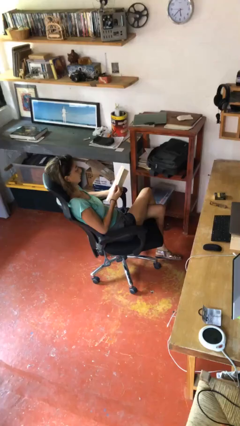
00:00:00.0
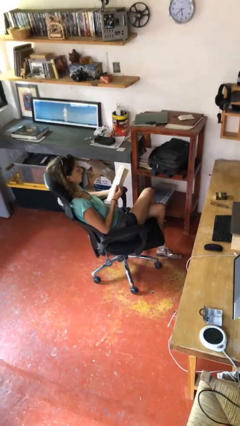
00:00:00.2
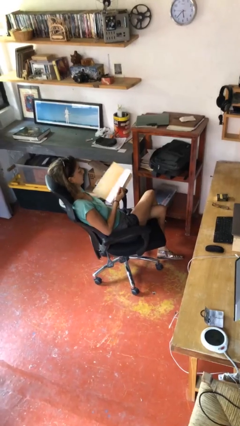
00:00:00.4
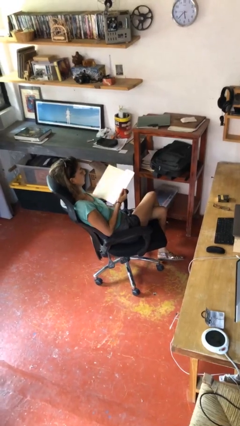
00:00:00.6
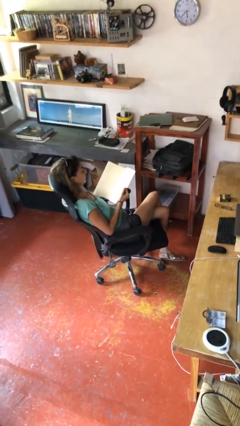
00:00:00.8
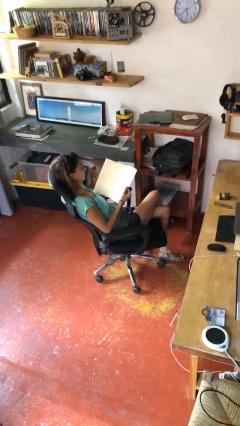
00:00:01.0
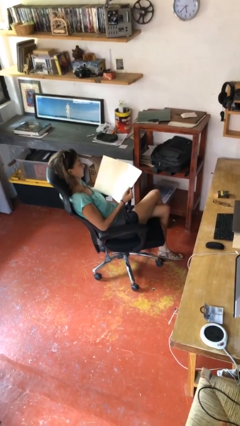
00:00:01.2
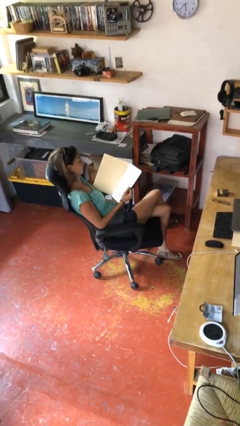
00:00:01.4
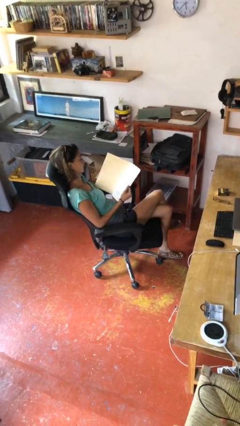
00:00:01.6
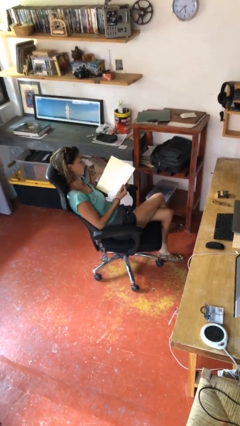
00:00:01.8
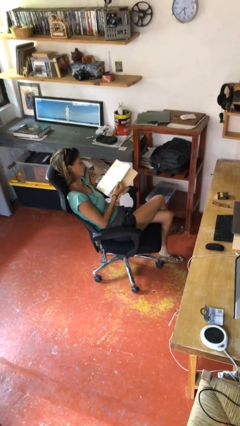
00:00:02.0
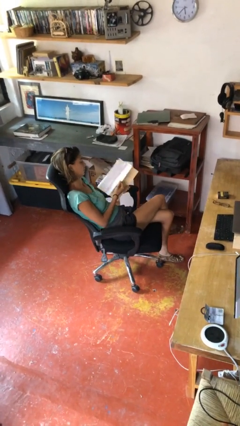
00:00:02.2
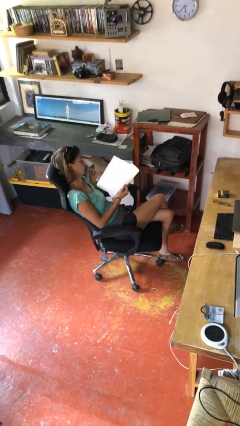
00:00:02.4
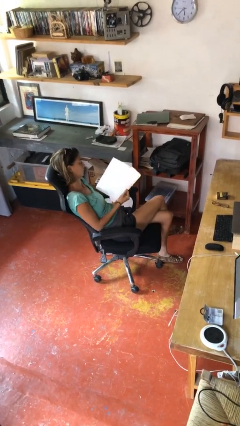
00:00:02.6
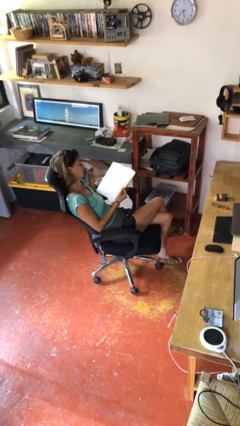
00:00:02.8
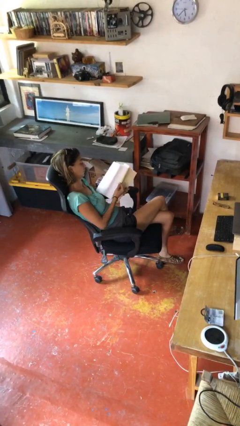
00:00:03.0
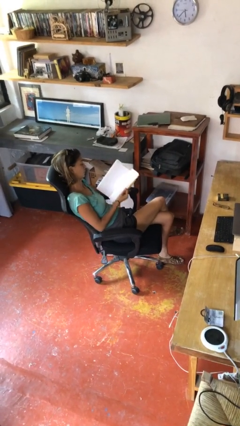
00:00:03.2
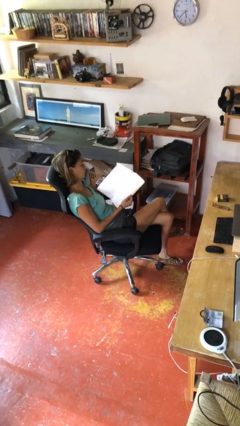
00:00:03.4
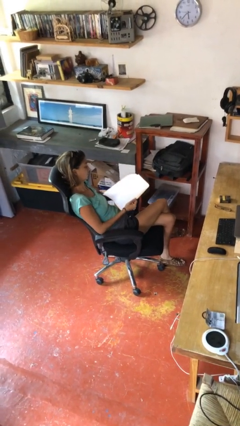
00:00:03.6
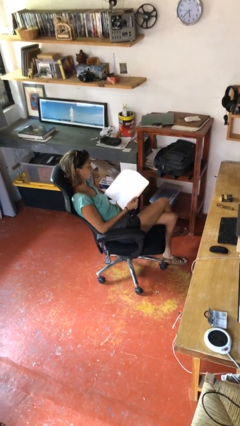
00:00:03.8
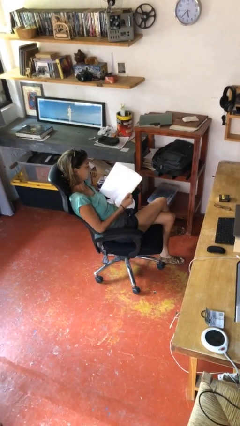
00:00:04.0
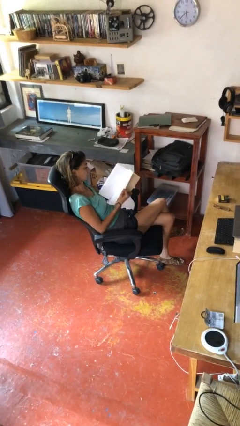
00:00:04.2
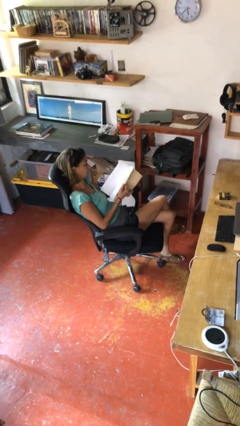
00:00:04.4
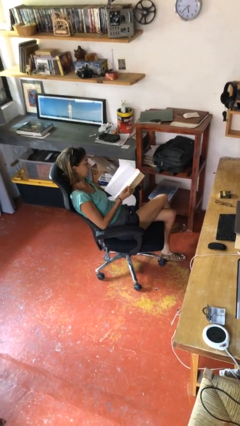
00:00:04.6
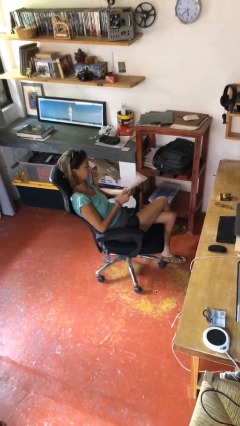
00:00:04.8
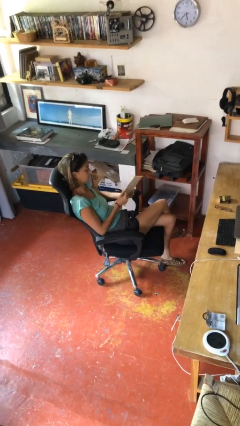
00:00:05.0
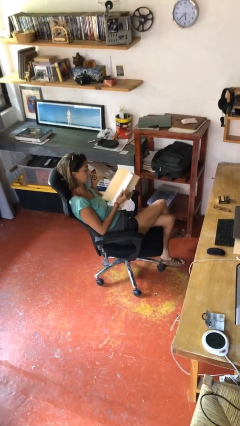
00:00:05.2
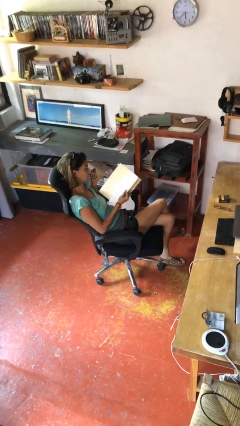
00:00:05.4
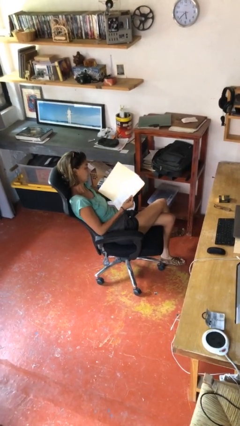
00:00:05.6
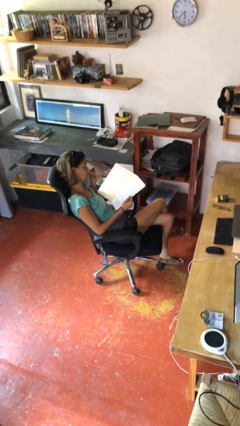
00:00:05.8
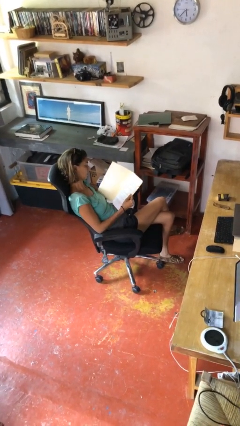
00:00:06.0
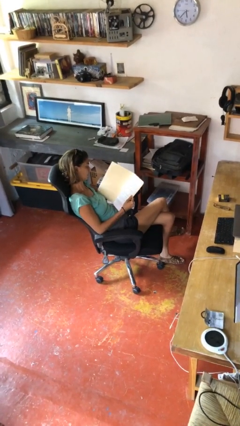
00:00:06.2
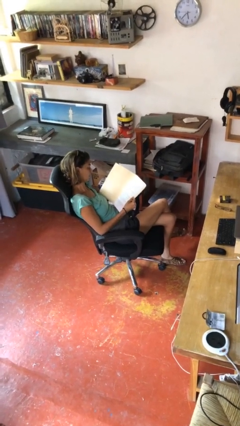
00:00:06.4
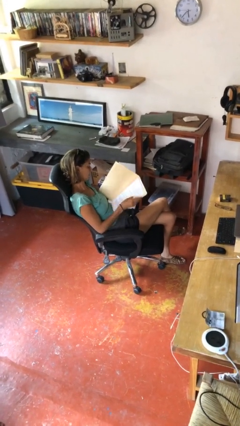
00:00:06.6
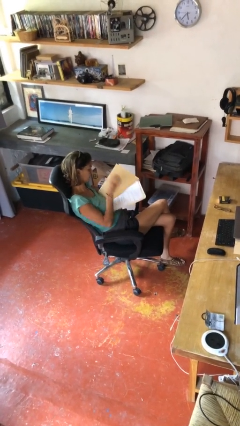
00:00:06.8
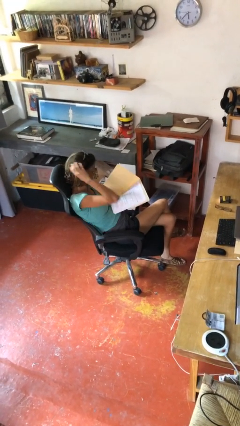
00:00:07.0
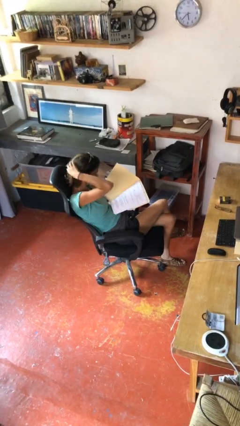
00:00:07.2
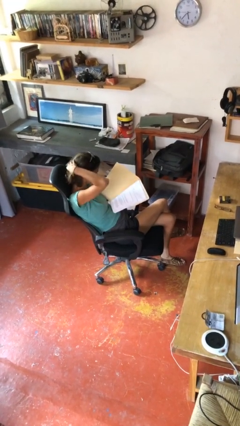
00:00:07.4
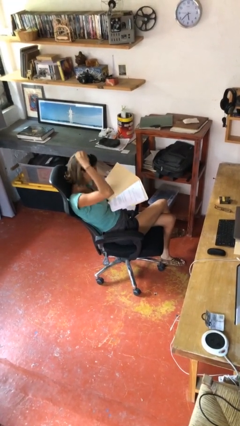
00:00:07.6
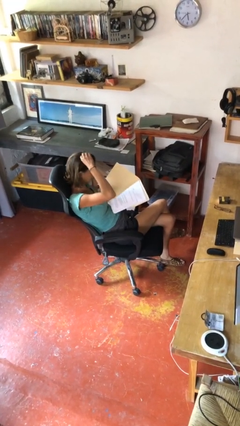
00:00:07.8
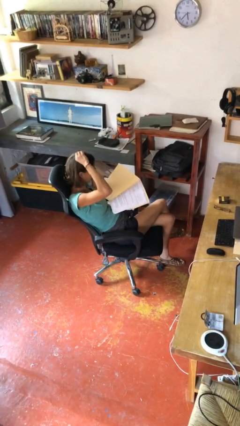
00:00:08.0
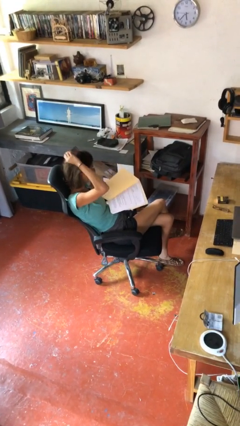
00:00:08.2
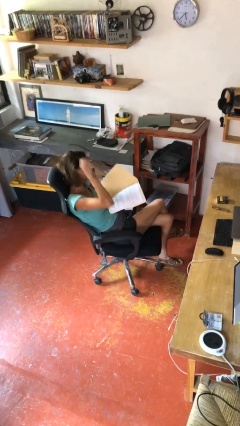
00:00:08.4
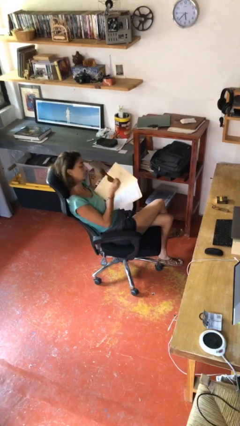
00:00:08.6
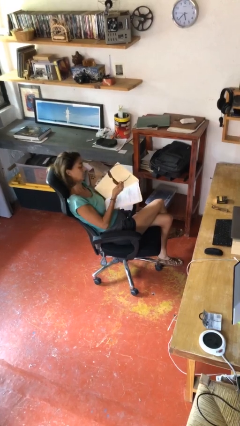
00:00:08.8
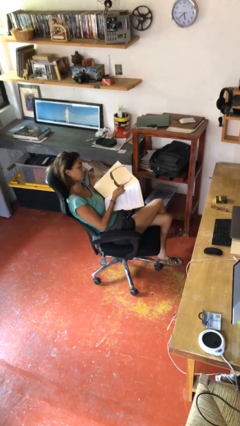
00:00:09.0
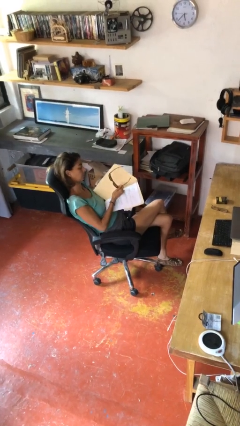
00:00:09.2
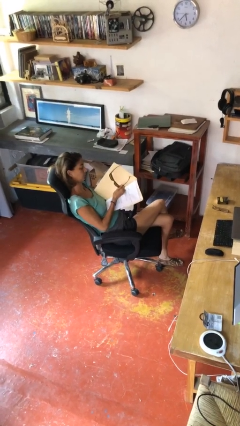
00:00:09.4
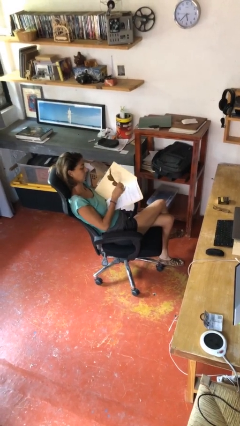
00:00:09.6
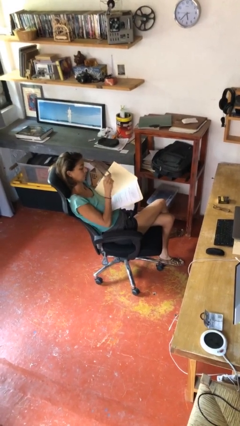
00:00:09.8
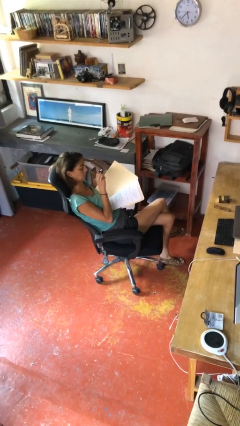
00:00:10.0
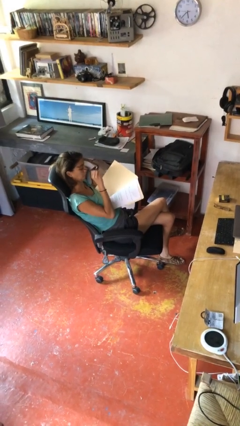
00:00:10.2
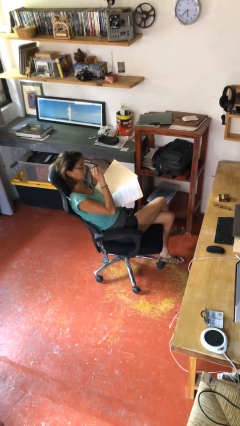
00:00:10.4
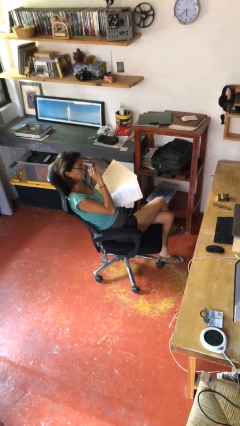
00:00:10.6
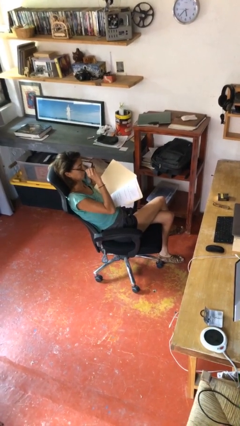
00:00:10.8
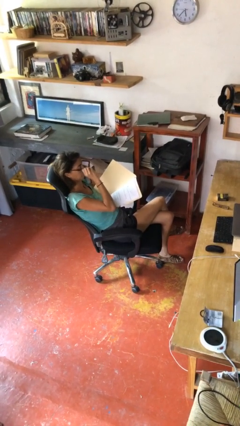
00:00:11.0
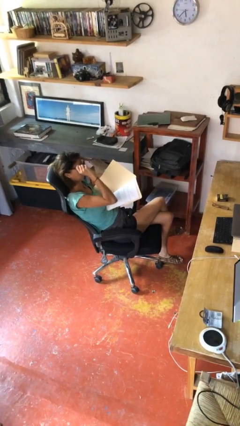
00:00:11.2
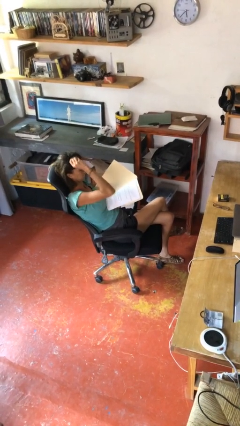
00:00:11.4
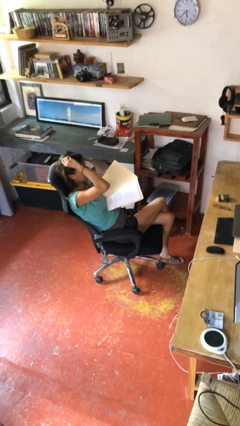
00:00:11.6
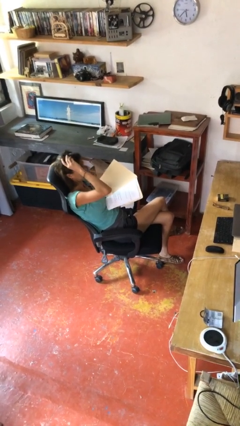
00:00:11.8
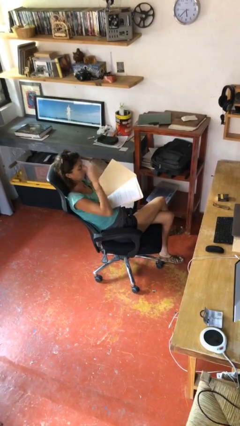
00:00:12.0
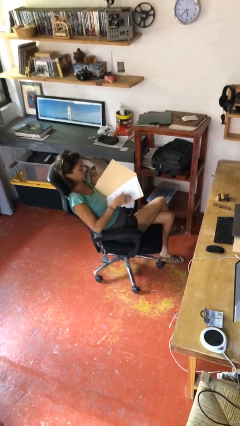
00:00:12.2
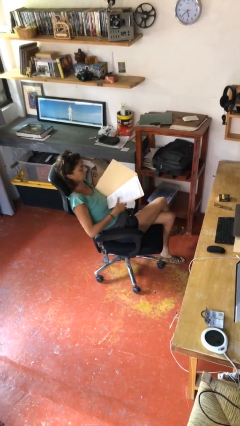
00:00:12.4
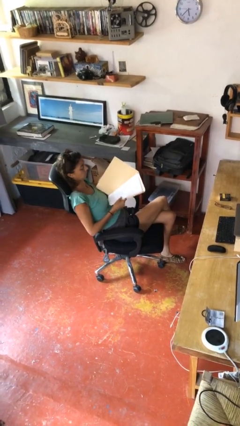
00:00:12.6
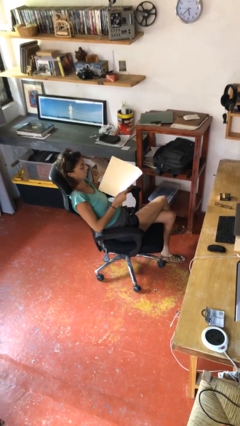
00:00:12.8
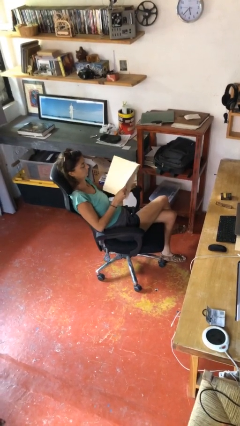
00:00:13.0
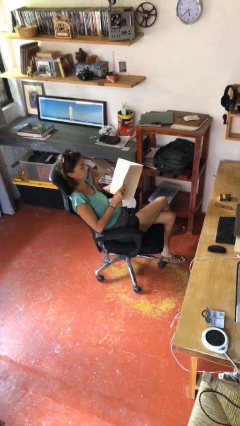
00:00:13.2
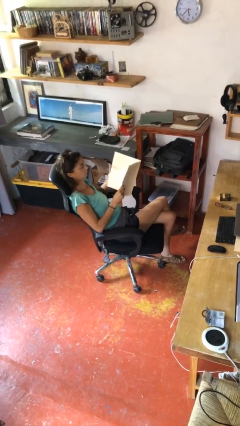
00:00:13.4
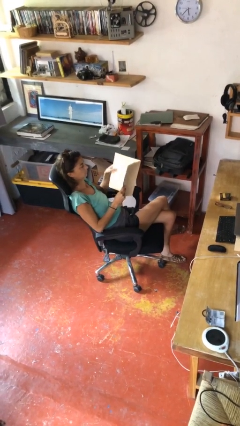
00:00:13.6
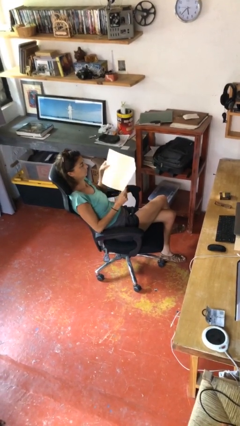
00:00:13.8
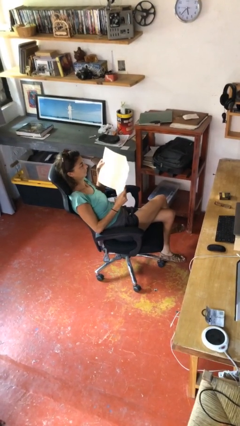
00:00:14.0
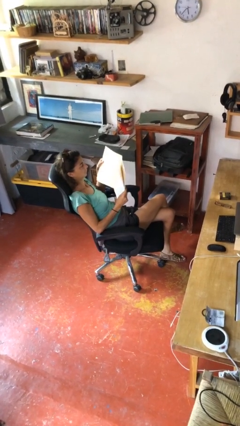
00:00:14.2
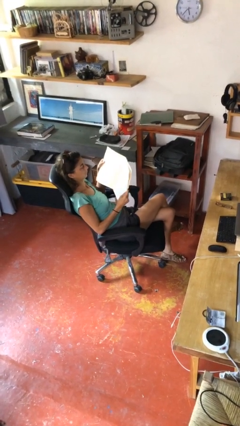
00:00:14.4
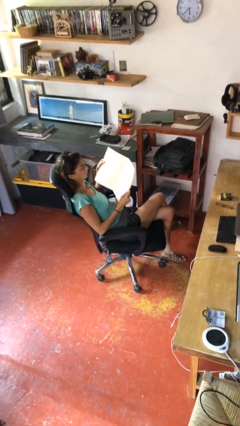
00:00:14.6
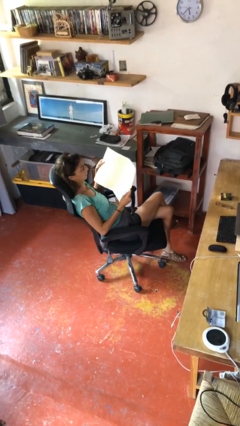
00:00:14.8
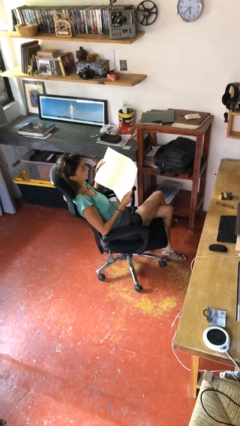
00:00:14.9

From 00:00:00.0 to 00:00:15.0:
person reads document

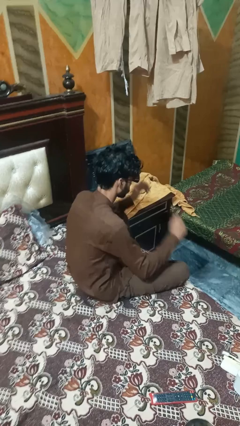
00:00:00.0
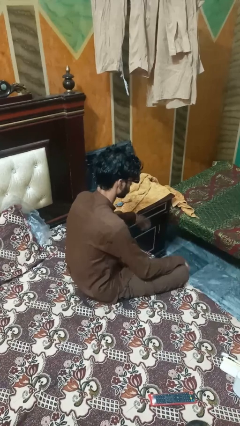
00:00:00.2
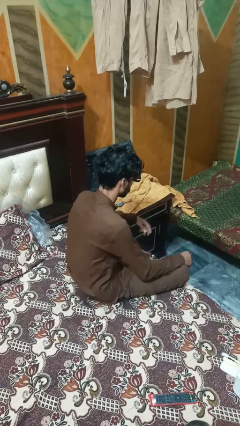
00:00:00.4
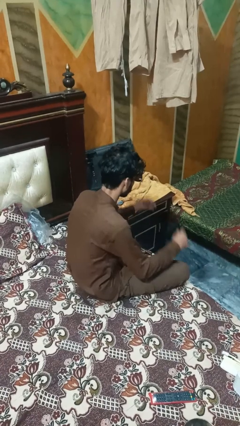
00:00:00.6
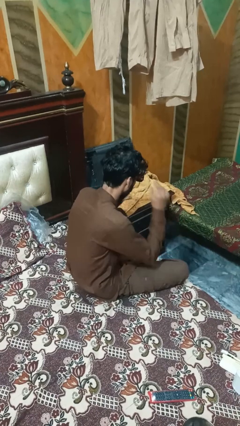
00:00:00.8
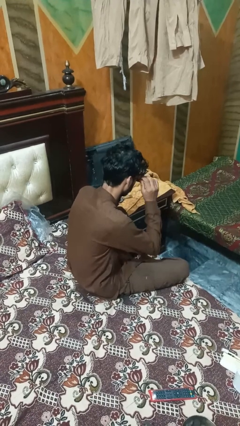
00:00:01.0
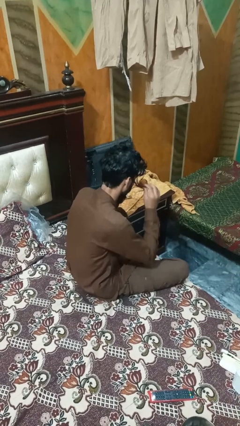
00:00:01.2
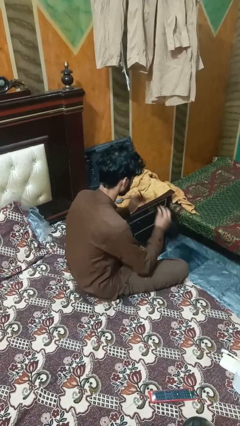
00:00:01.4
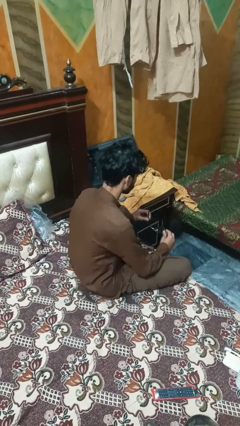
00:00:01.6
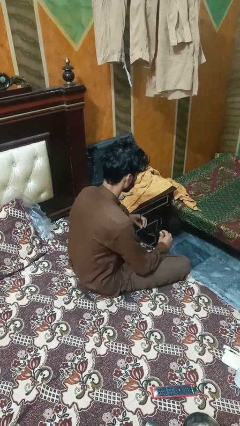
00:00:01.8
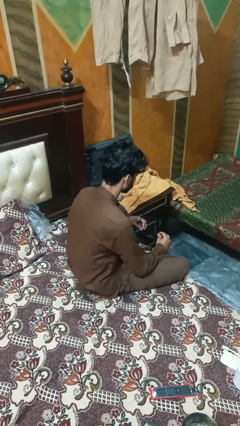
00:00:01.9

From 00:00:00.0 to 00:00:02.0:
person takes off sunglasses

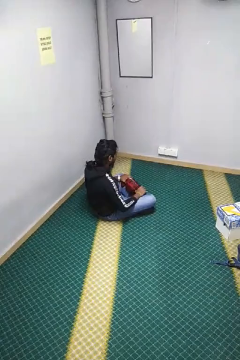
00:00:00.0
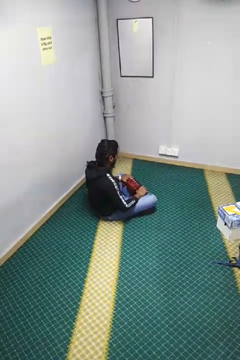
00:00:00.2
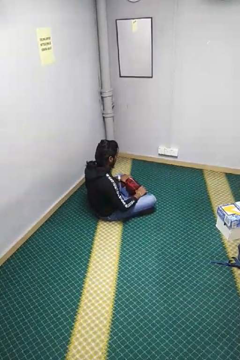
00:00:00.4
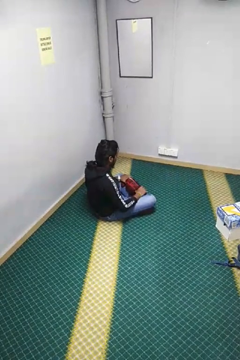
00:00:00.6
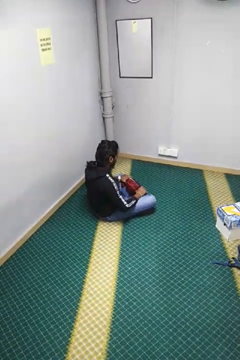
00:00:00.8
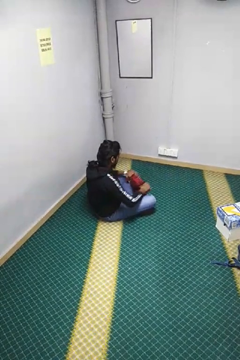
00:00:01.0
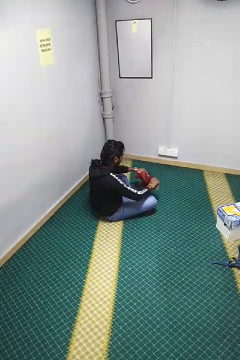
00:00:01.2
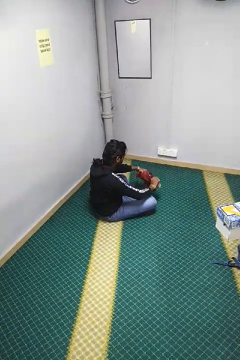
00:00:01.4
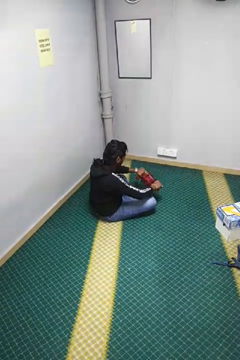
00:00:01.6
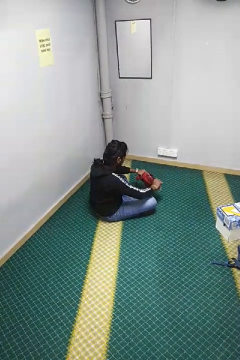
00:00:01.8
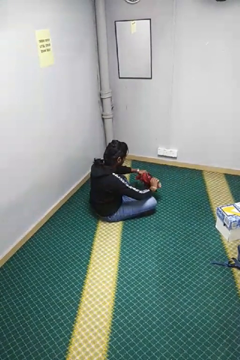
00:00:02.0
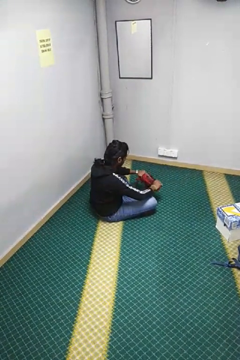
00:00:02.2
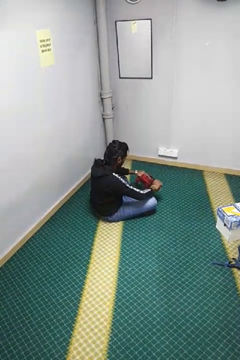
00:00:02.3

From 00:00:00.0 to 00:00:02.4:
person squeezes object
